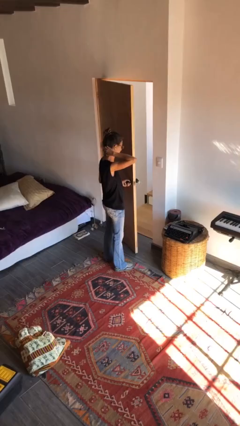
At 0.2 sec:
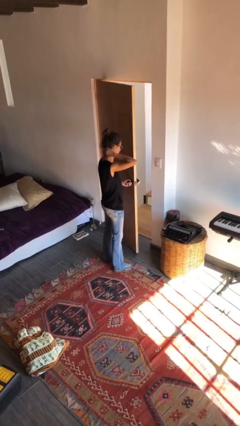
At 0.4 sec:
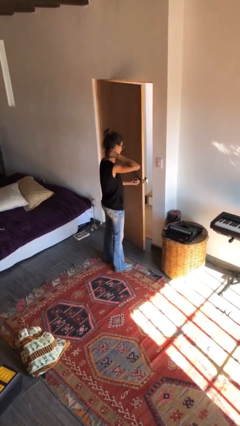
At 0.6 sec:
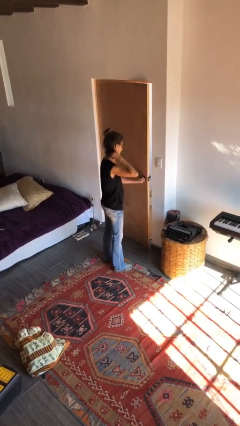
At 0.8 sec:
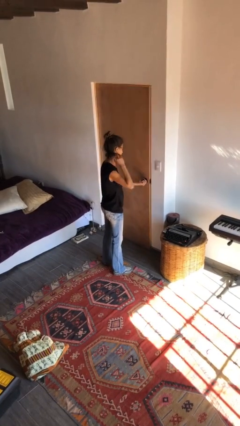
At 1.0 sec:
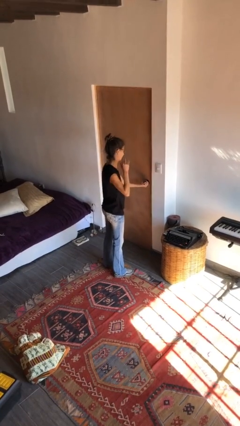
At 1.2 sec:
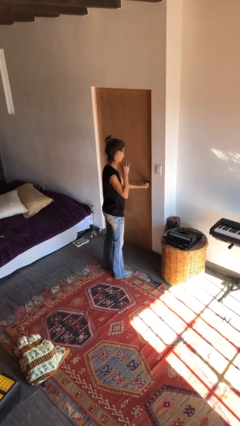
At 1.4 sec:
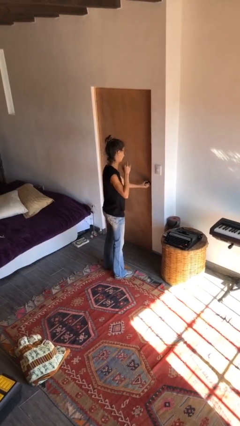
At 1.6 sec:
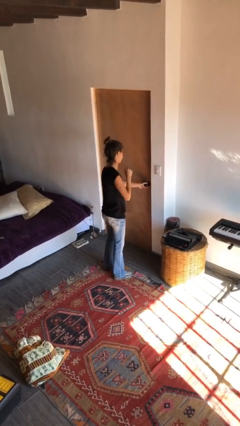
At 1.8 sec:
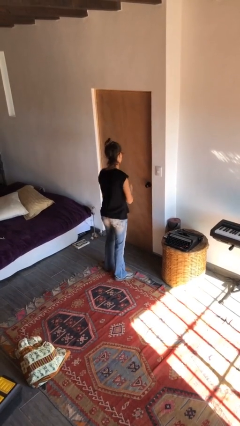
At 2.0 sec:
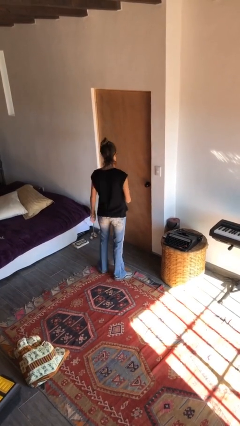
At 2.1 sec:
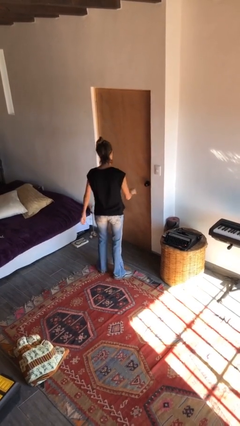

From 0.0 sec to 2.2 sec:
person closes facility door

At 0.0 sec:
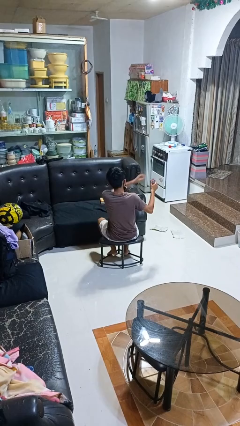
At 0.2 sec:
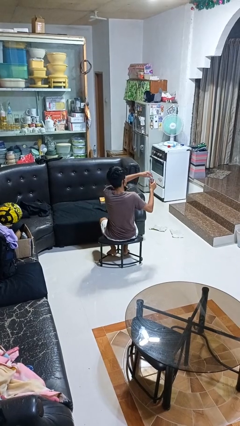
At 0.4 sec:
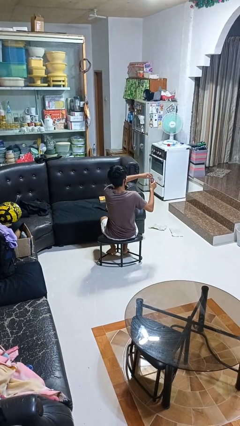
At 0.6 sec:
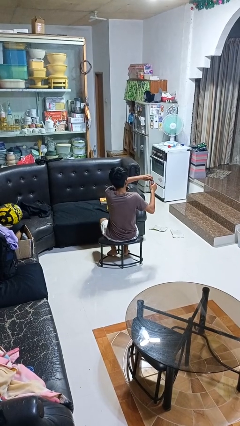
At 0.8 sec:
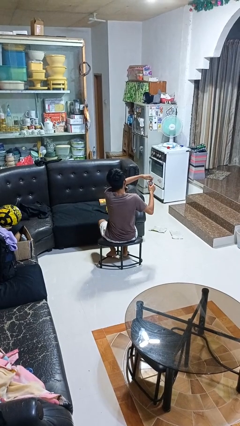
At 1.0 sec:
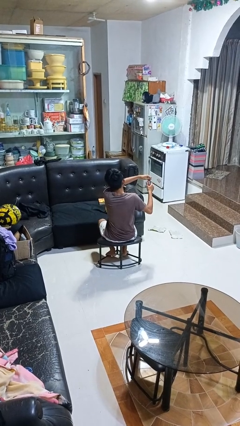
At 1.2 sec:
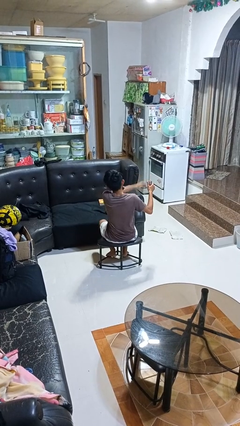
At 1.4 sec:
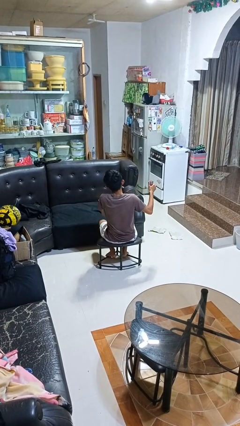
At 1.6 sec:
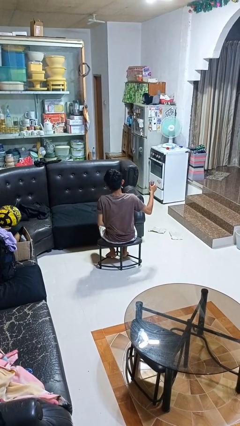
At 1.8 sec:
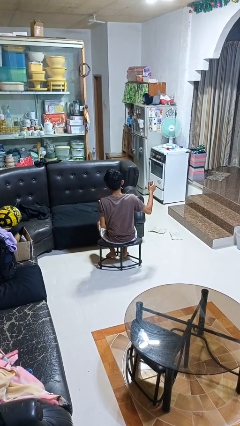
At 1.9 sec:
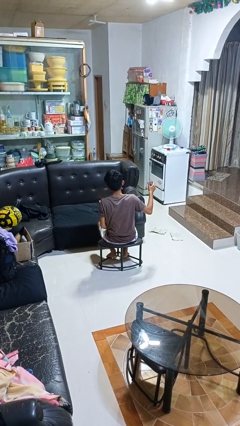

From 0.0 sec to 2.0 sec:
person opens beverage can

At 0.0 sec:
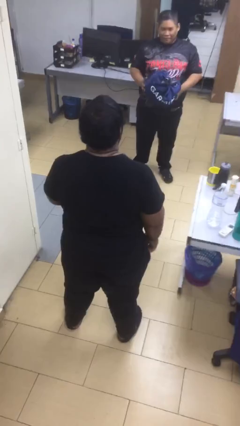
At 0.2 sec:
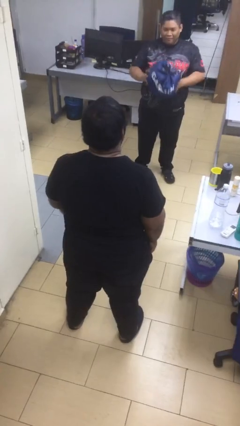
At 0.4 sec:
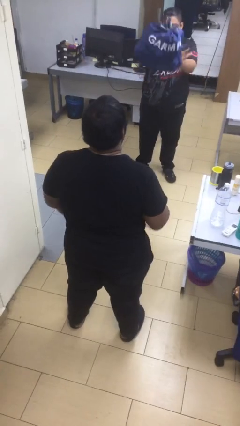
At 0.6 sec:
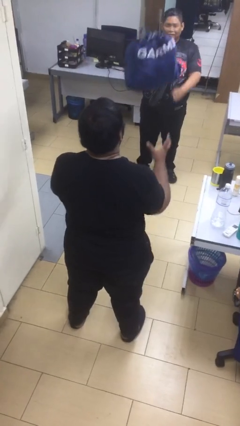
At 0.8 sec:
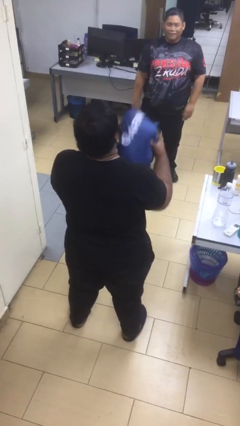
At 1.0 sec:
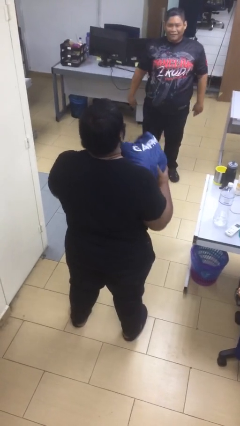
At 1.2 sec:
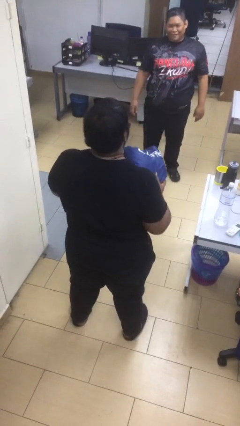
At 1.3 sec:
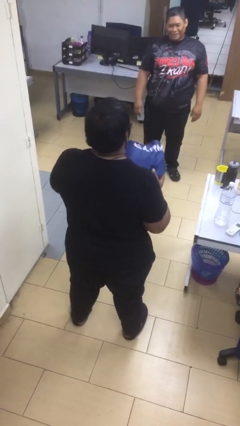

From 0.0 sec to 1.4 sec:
person catches object from person

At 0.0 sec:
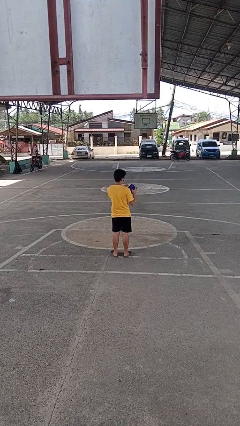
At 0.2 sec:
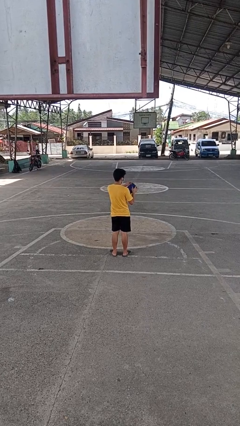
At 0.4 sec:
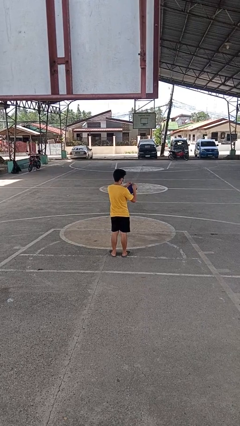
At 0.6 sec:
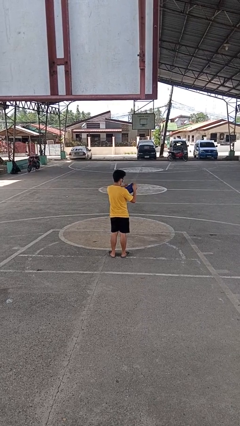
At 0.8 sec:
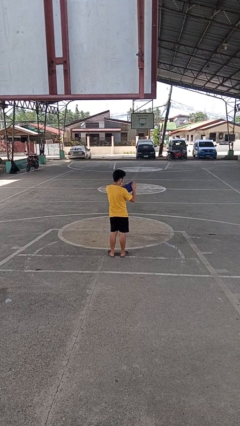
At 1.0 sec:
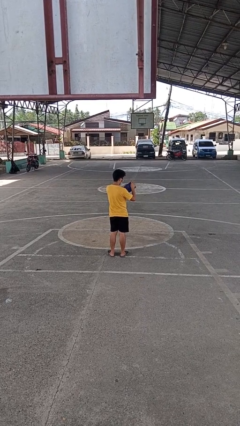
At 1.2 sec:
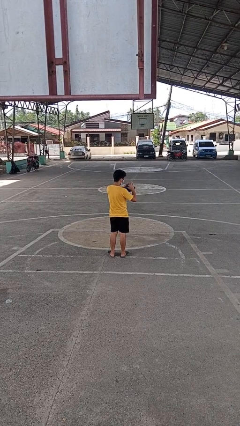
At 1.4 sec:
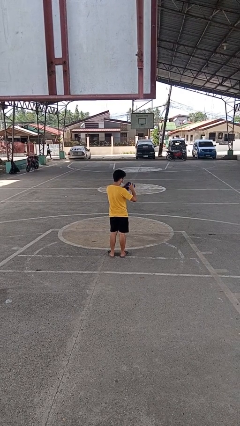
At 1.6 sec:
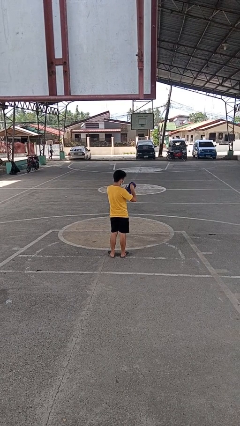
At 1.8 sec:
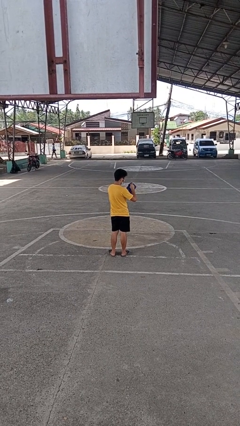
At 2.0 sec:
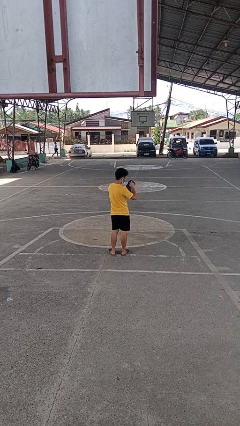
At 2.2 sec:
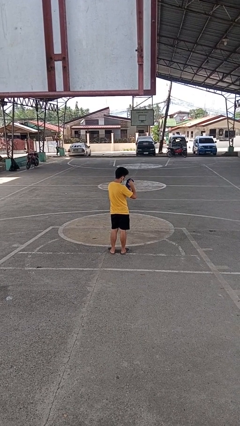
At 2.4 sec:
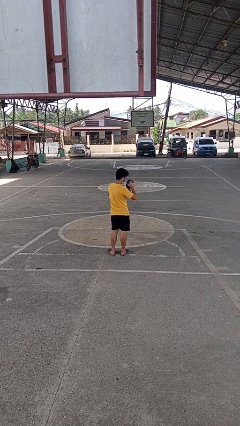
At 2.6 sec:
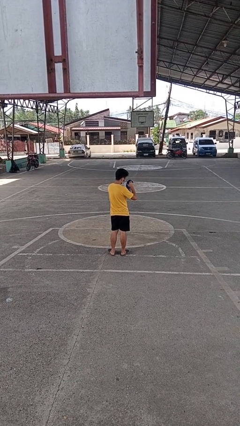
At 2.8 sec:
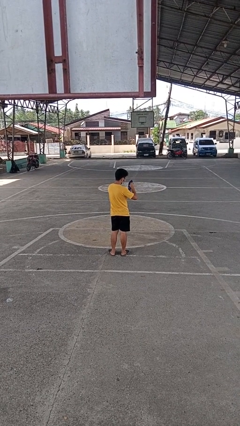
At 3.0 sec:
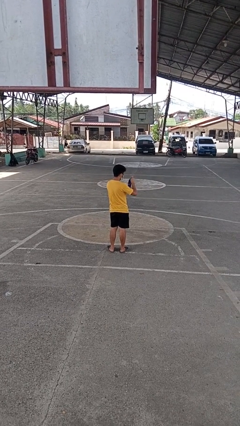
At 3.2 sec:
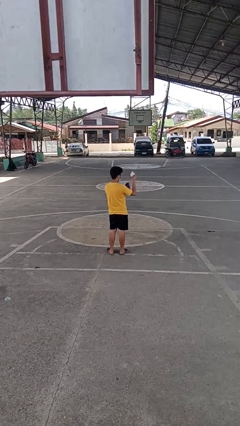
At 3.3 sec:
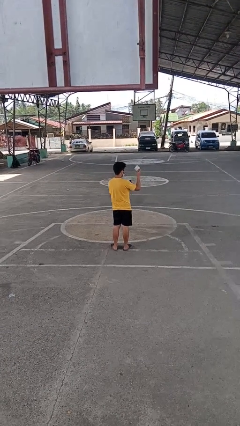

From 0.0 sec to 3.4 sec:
person searches in purse

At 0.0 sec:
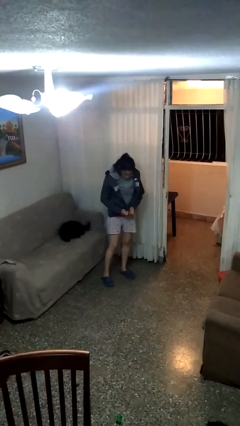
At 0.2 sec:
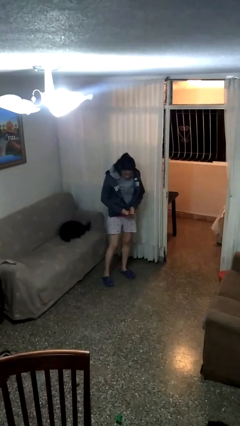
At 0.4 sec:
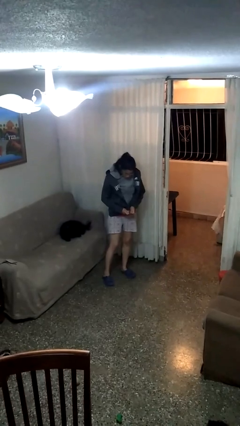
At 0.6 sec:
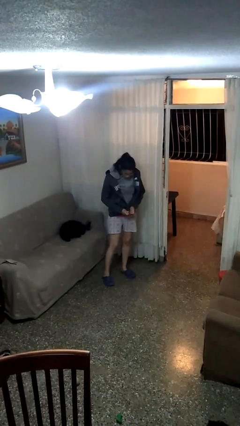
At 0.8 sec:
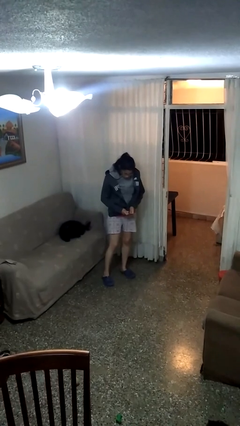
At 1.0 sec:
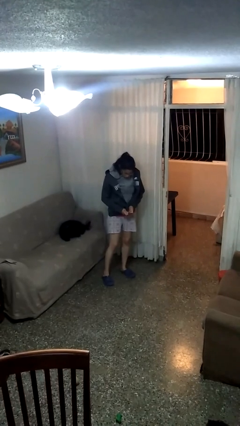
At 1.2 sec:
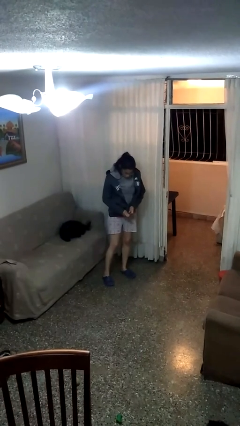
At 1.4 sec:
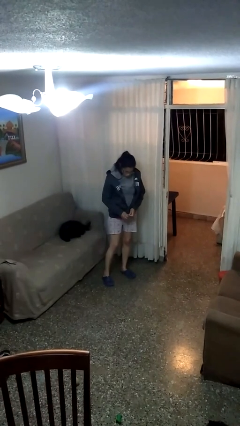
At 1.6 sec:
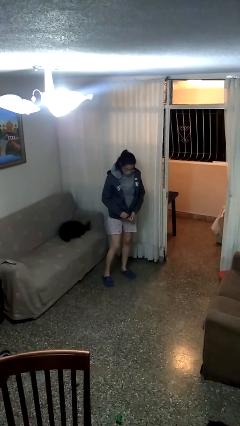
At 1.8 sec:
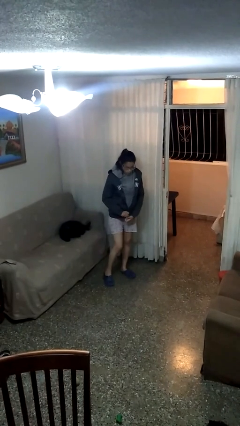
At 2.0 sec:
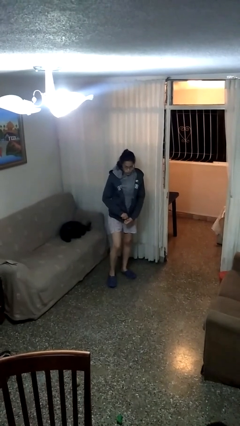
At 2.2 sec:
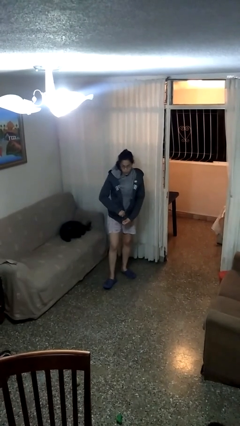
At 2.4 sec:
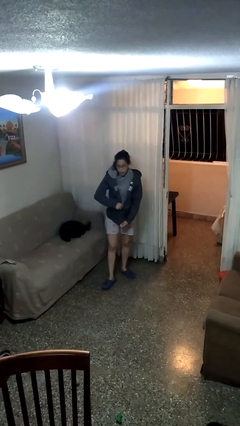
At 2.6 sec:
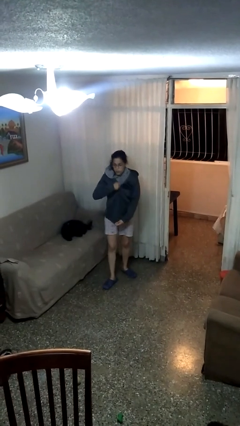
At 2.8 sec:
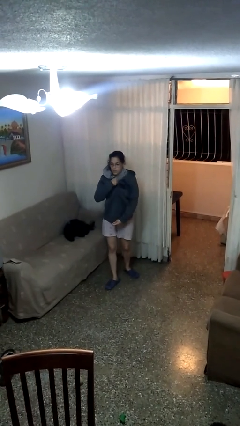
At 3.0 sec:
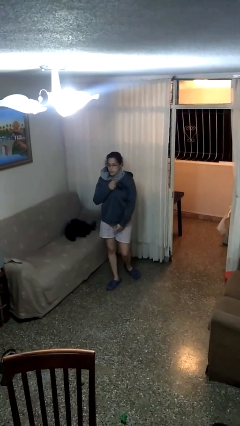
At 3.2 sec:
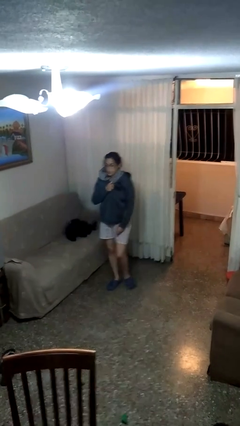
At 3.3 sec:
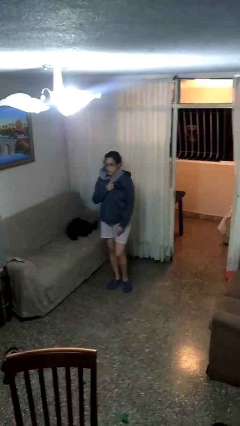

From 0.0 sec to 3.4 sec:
person zips up jacket

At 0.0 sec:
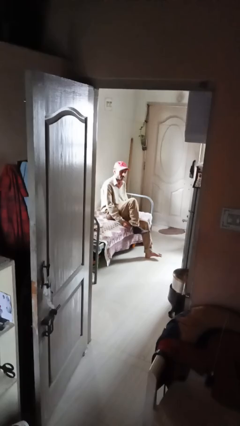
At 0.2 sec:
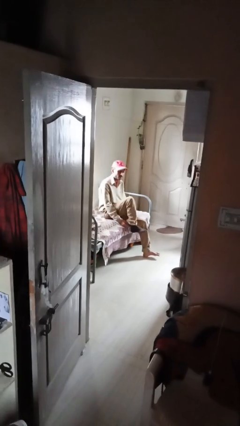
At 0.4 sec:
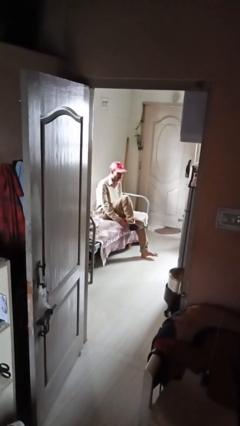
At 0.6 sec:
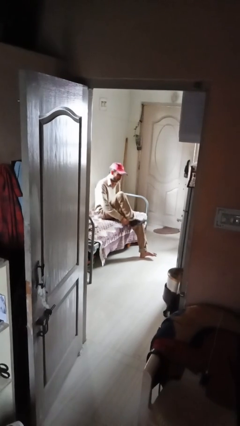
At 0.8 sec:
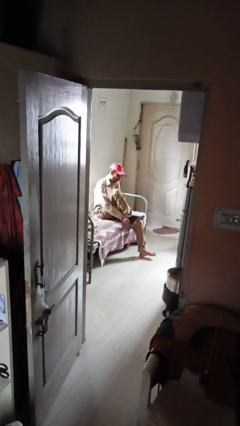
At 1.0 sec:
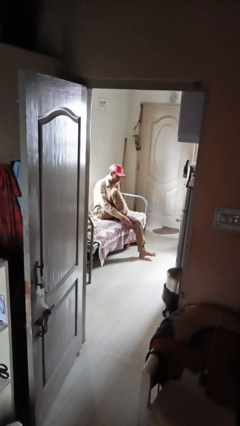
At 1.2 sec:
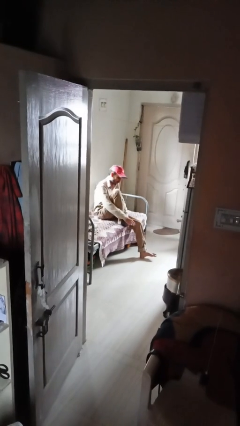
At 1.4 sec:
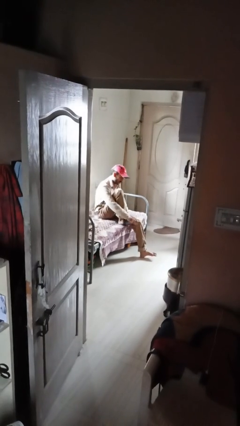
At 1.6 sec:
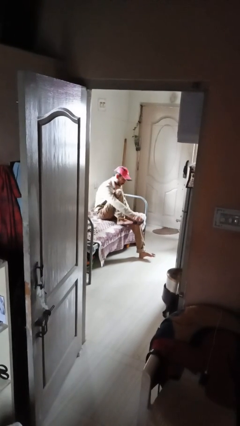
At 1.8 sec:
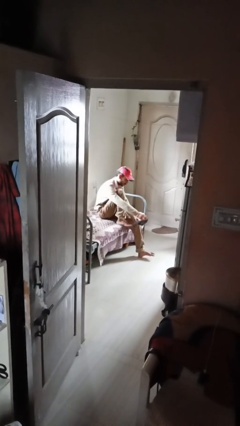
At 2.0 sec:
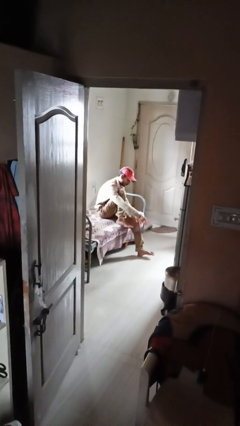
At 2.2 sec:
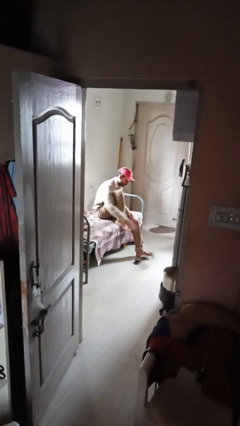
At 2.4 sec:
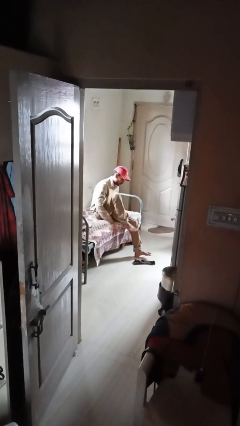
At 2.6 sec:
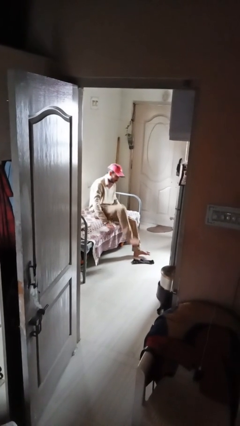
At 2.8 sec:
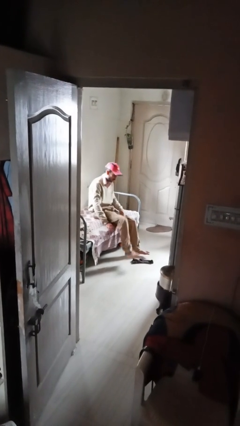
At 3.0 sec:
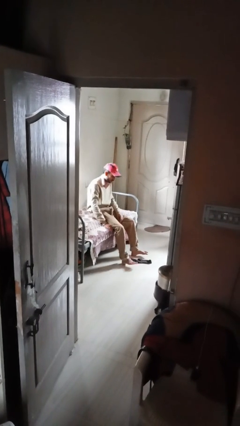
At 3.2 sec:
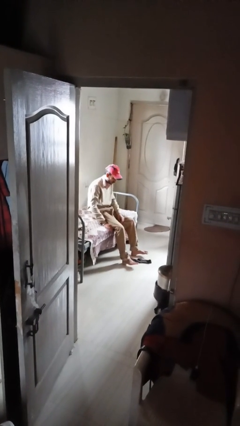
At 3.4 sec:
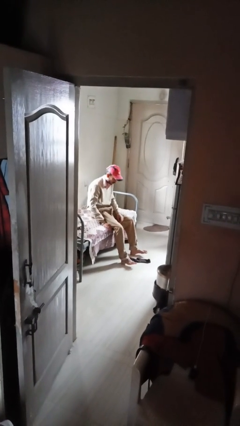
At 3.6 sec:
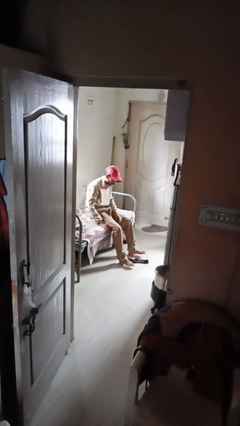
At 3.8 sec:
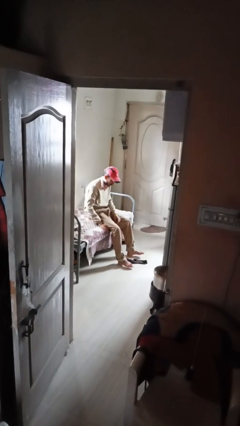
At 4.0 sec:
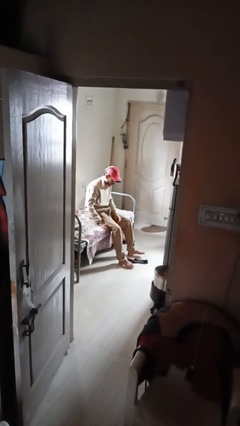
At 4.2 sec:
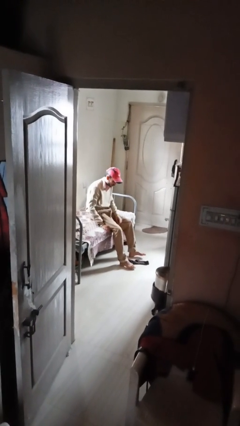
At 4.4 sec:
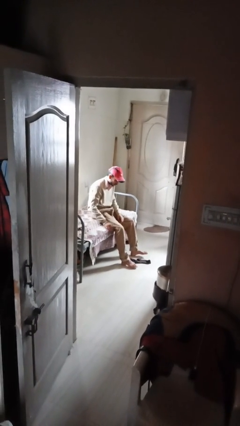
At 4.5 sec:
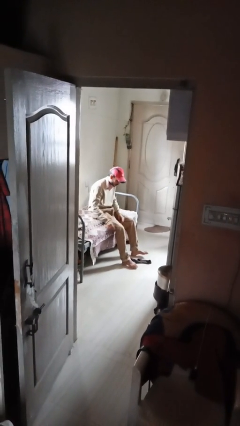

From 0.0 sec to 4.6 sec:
person takes off socks

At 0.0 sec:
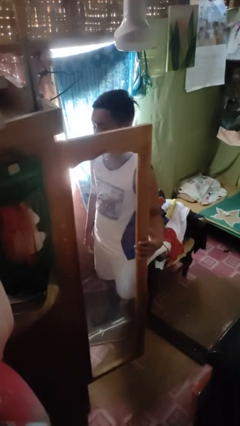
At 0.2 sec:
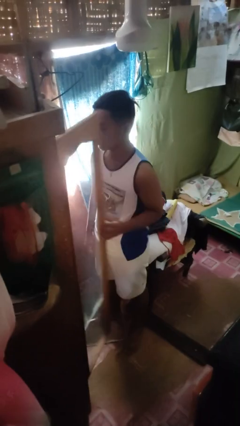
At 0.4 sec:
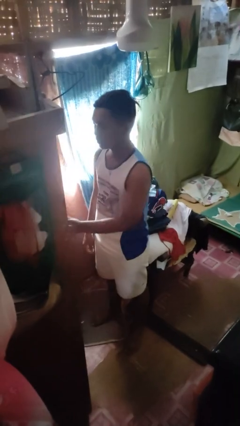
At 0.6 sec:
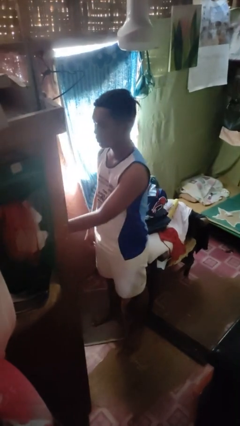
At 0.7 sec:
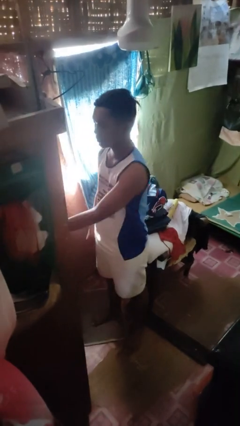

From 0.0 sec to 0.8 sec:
person closes closet door
